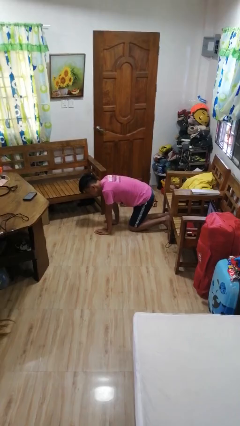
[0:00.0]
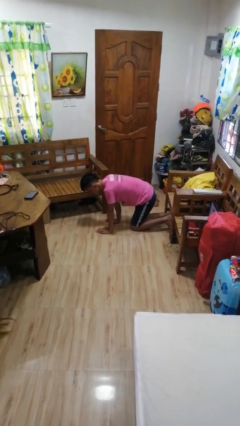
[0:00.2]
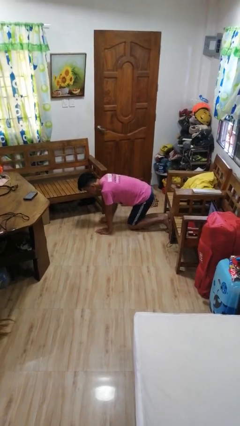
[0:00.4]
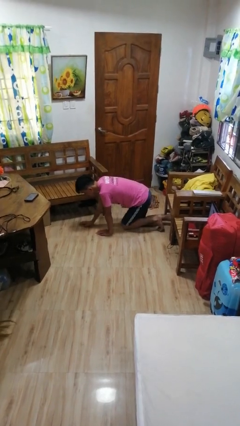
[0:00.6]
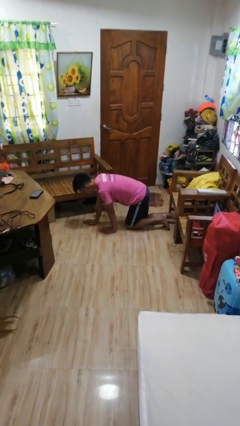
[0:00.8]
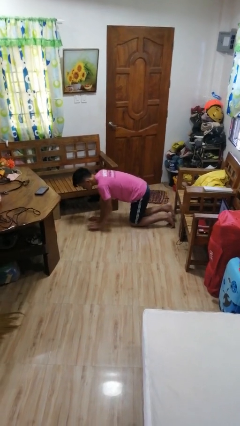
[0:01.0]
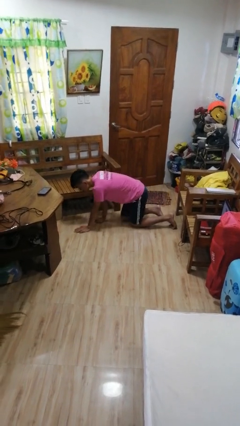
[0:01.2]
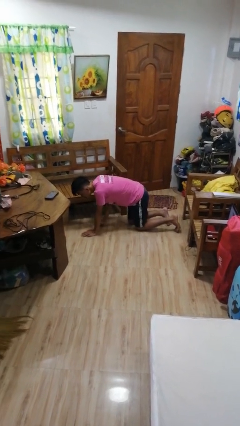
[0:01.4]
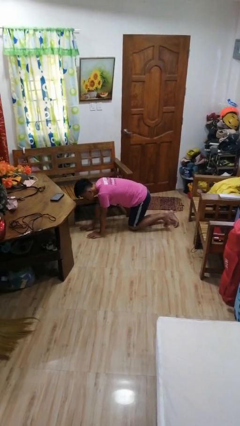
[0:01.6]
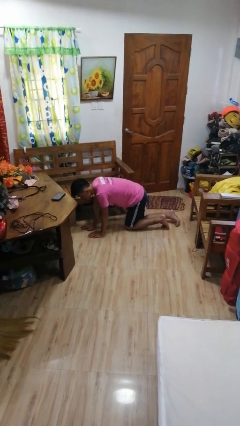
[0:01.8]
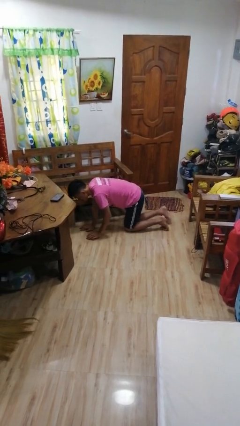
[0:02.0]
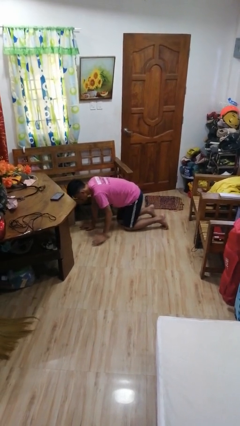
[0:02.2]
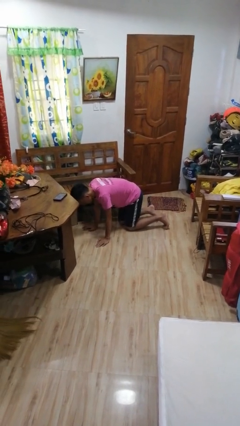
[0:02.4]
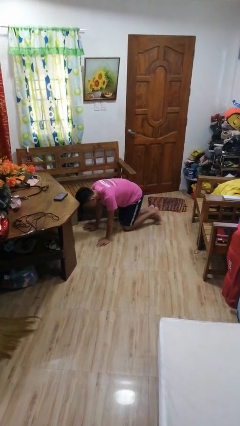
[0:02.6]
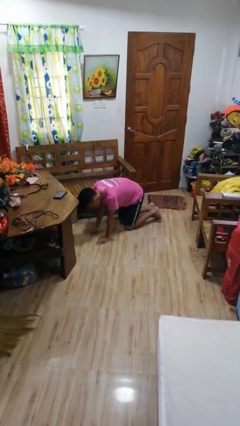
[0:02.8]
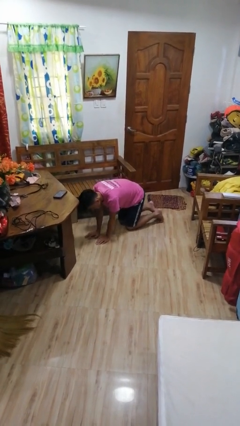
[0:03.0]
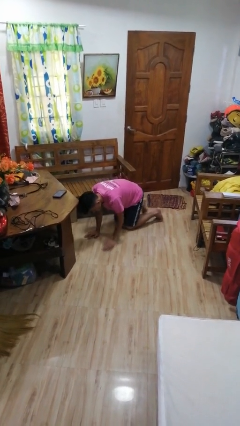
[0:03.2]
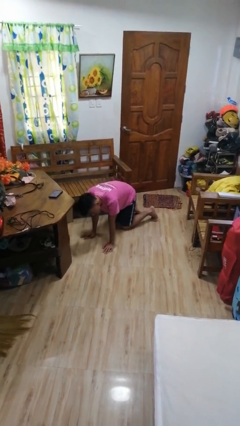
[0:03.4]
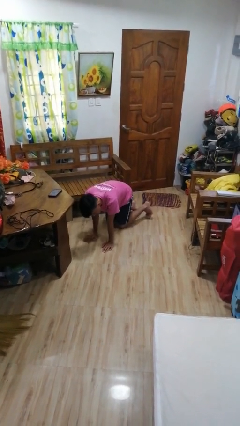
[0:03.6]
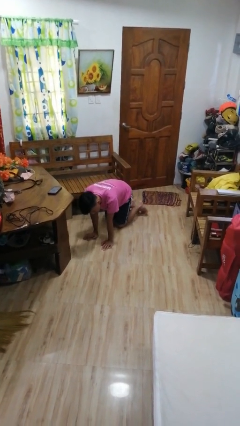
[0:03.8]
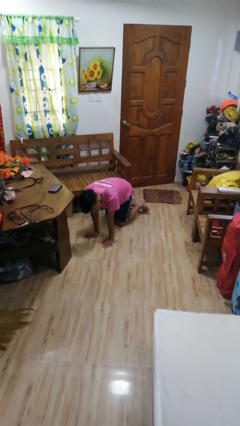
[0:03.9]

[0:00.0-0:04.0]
person crawls

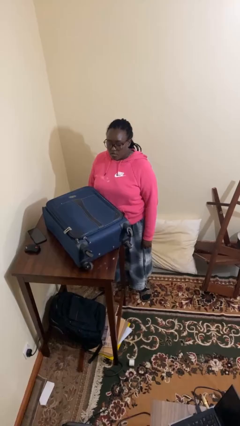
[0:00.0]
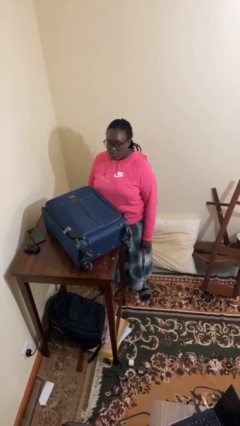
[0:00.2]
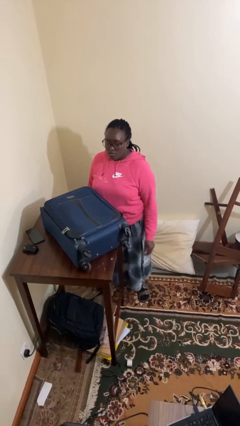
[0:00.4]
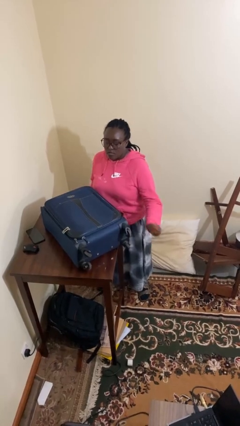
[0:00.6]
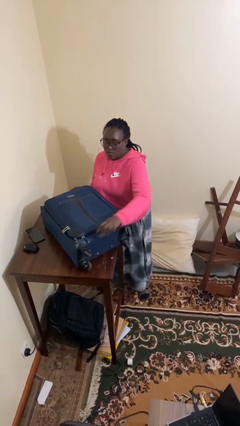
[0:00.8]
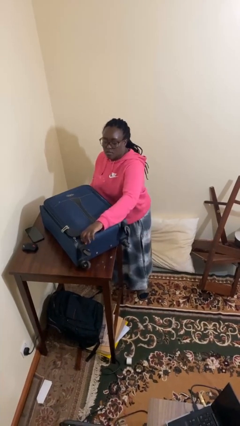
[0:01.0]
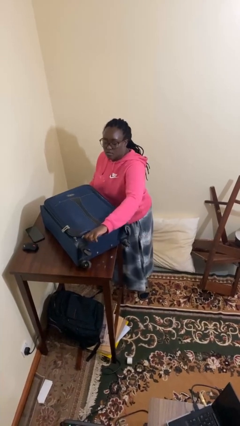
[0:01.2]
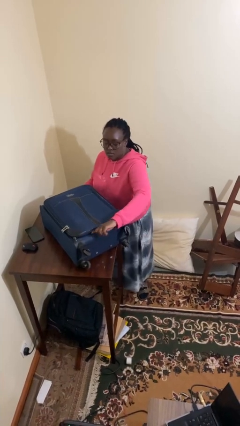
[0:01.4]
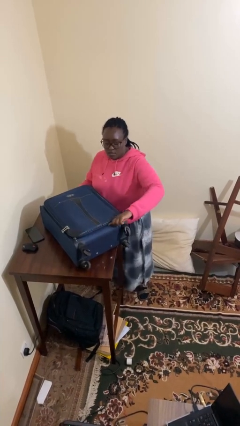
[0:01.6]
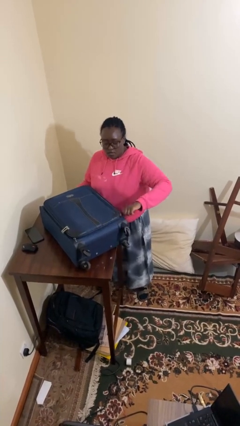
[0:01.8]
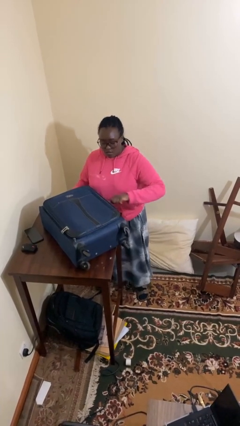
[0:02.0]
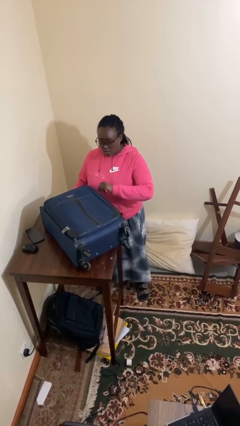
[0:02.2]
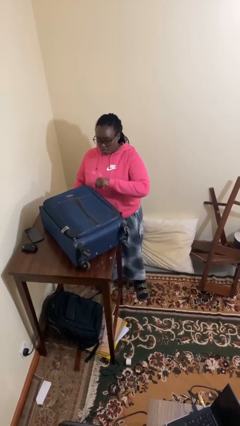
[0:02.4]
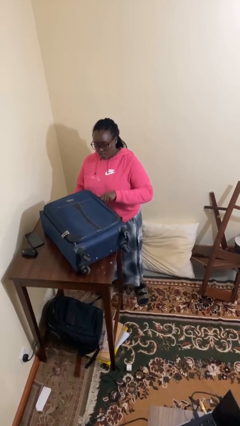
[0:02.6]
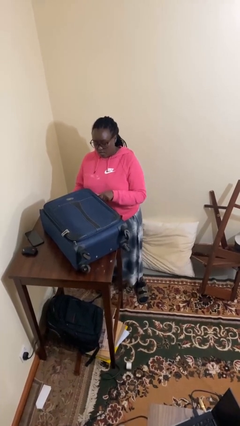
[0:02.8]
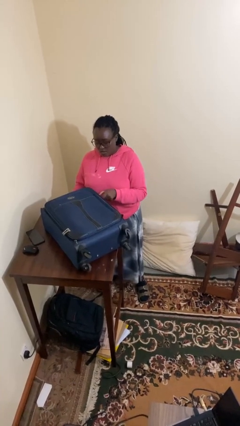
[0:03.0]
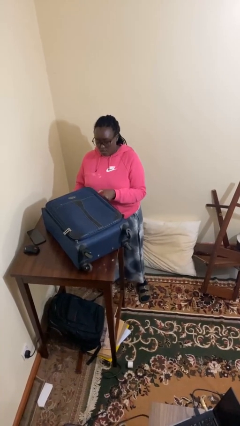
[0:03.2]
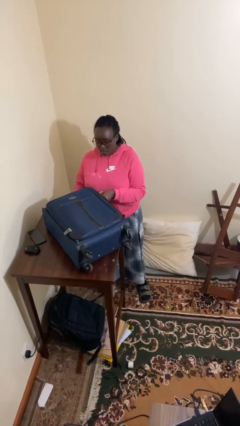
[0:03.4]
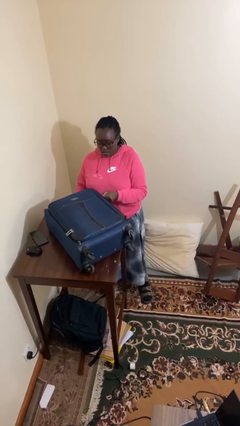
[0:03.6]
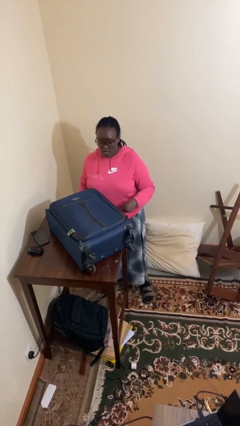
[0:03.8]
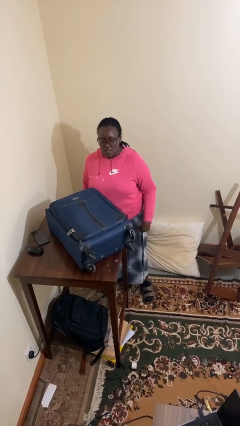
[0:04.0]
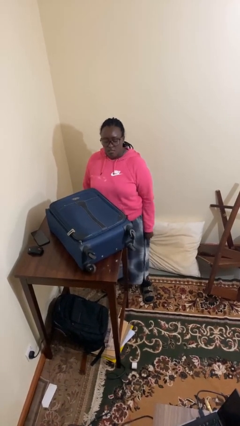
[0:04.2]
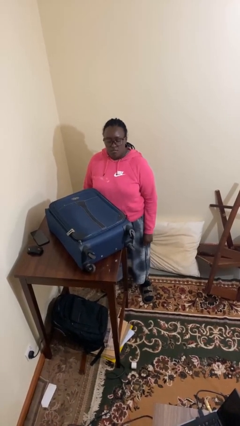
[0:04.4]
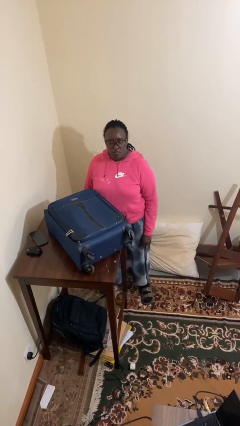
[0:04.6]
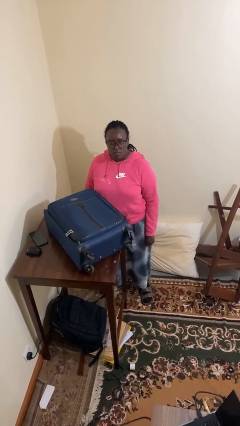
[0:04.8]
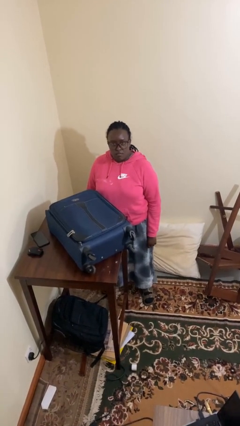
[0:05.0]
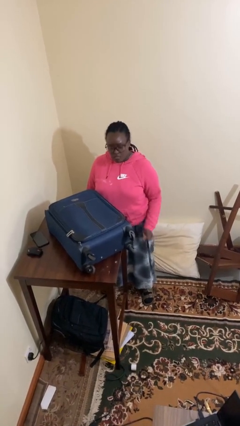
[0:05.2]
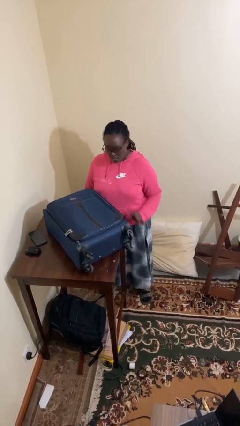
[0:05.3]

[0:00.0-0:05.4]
person opens suitcase

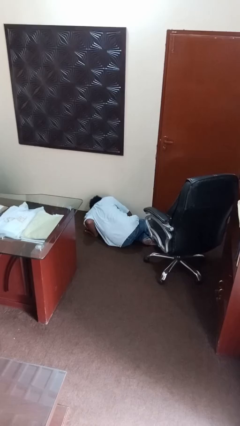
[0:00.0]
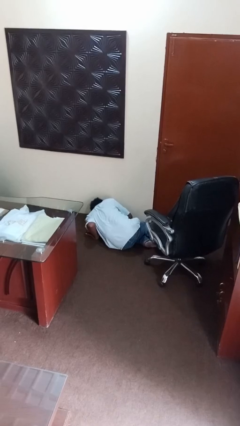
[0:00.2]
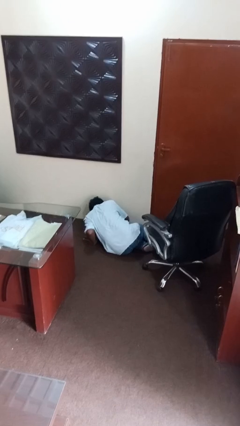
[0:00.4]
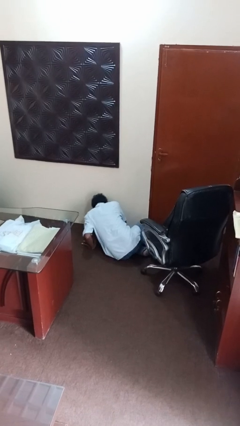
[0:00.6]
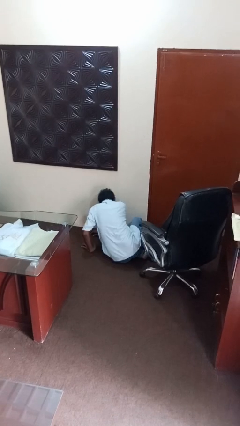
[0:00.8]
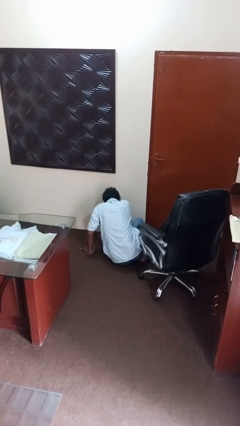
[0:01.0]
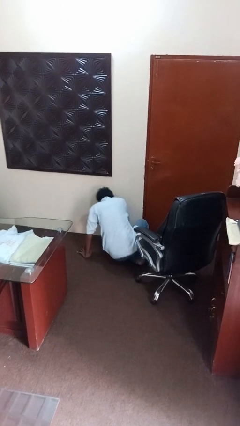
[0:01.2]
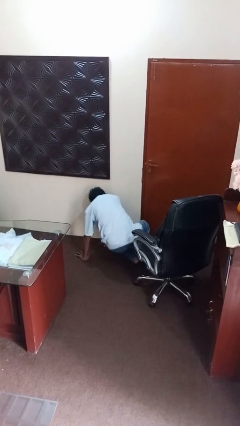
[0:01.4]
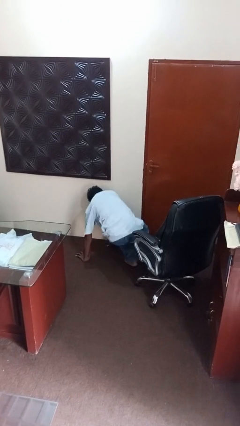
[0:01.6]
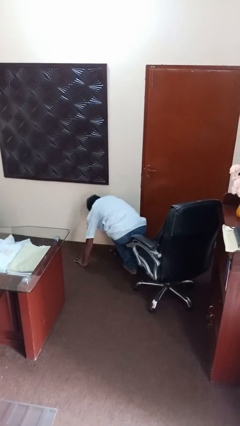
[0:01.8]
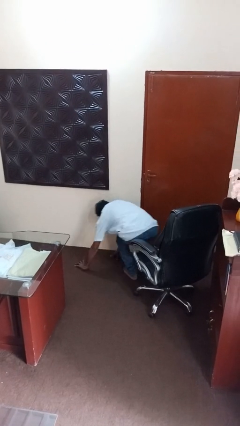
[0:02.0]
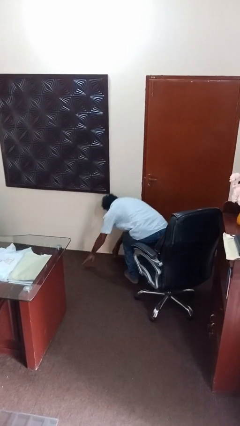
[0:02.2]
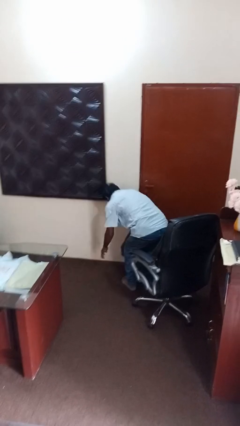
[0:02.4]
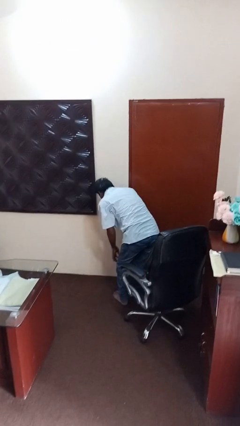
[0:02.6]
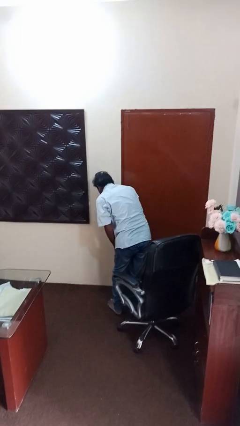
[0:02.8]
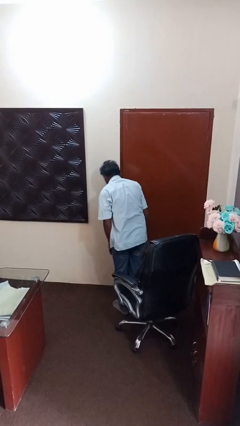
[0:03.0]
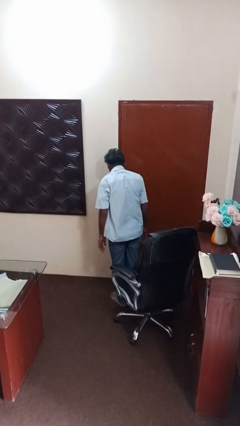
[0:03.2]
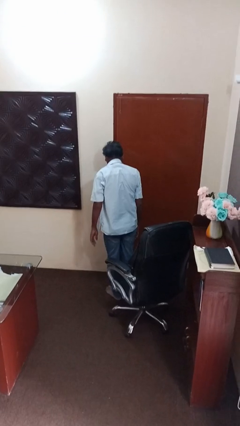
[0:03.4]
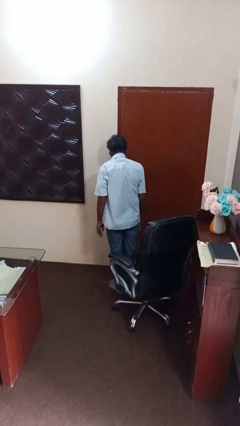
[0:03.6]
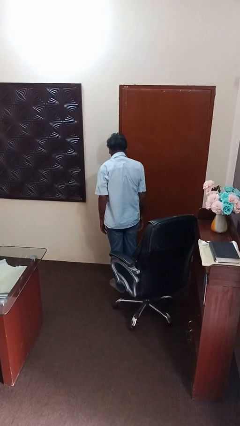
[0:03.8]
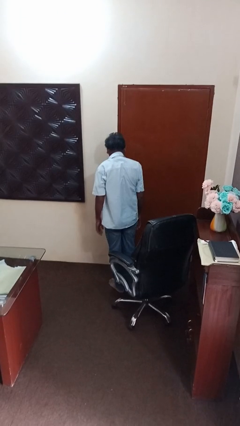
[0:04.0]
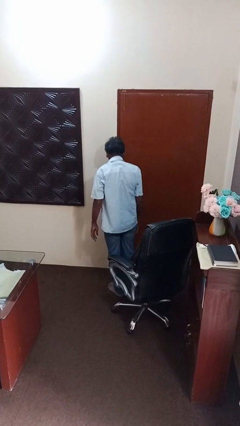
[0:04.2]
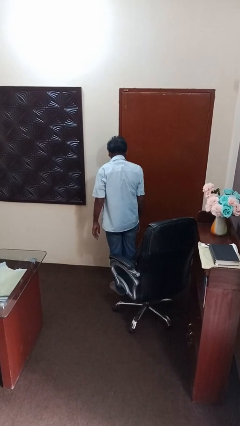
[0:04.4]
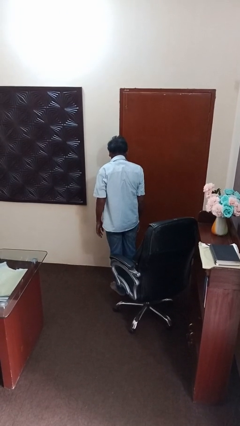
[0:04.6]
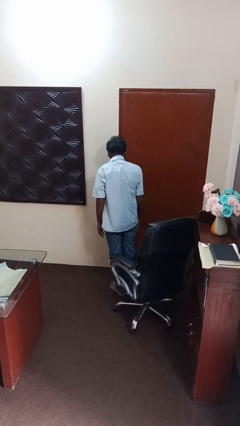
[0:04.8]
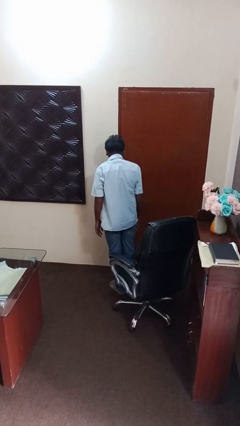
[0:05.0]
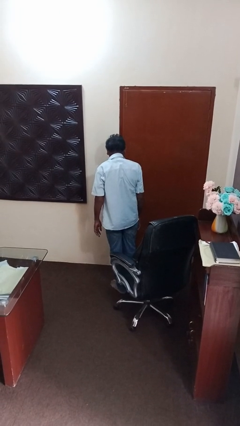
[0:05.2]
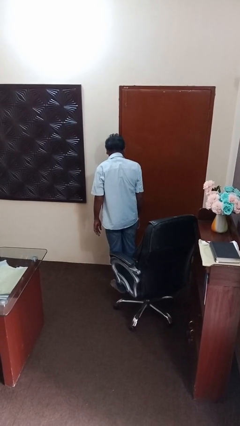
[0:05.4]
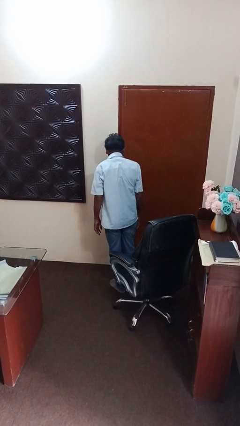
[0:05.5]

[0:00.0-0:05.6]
person stands up from floor

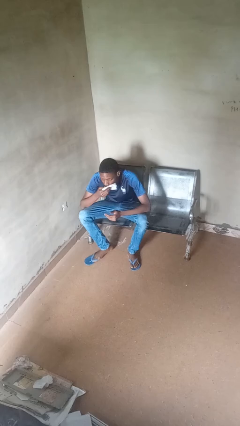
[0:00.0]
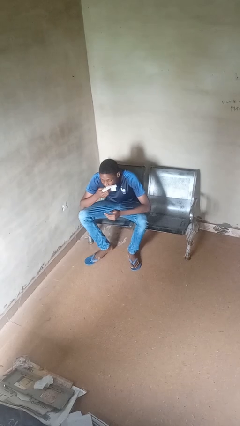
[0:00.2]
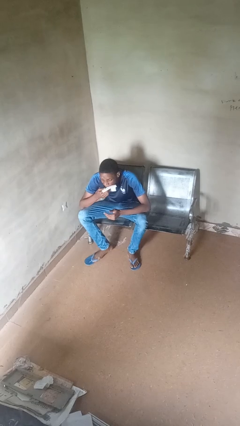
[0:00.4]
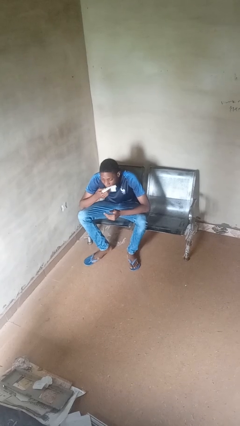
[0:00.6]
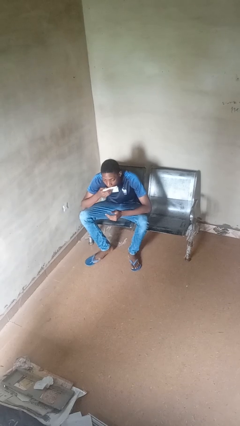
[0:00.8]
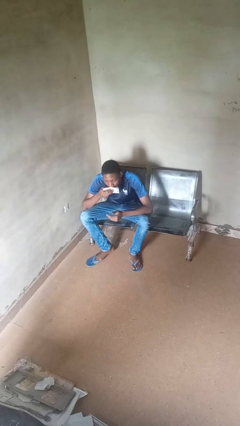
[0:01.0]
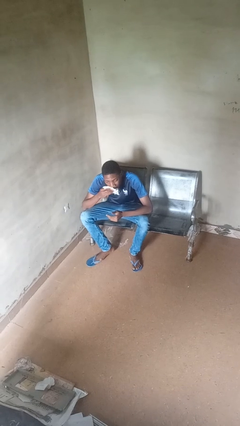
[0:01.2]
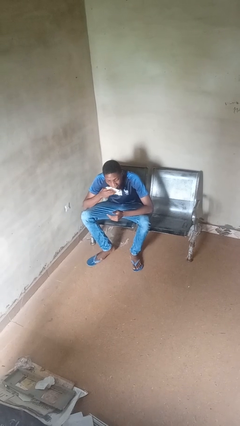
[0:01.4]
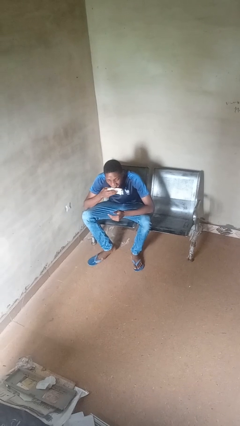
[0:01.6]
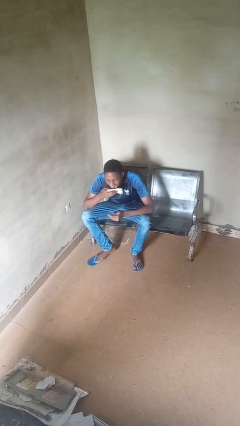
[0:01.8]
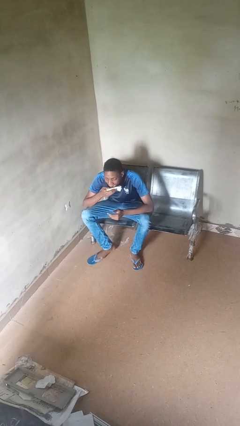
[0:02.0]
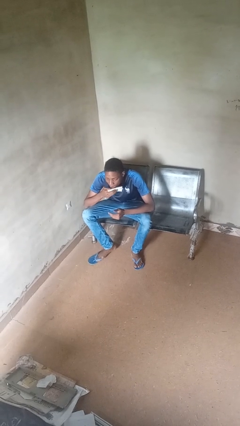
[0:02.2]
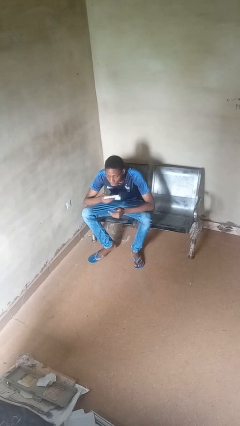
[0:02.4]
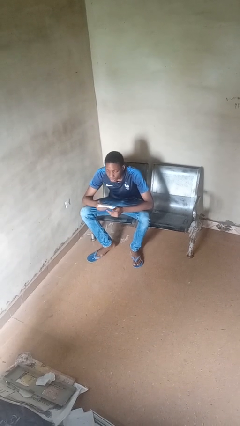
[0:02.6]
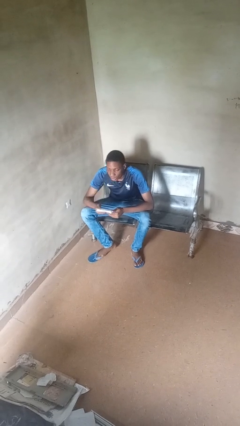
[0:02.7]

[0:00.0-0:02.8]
person wipes mouth with napkin
